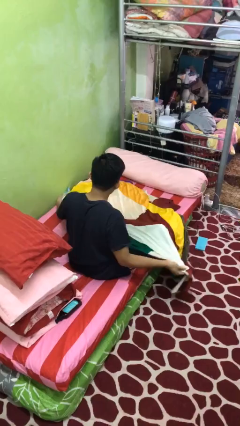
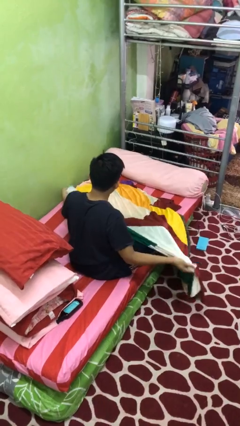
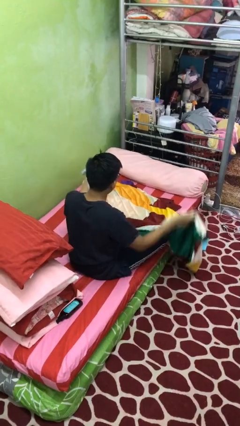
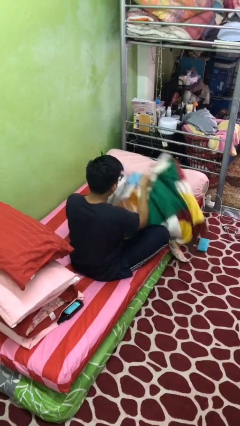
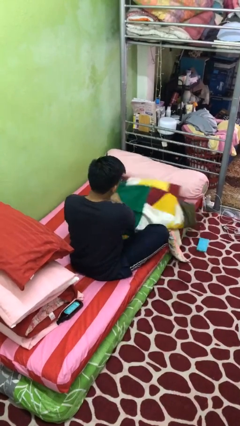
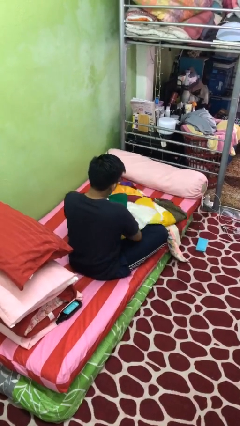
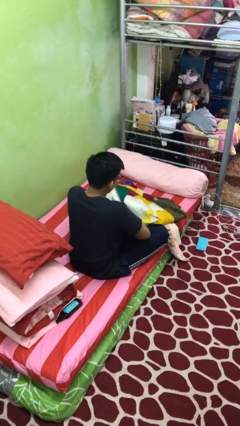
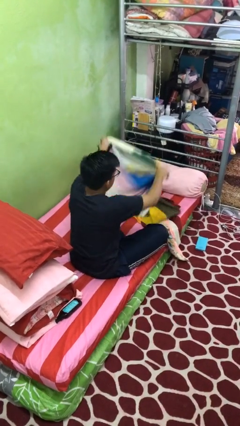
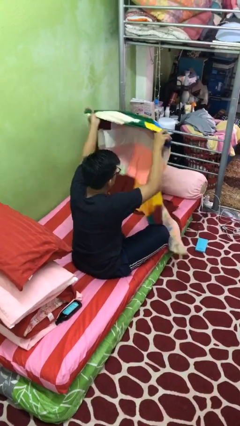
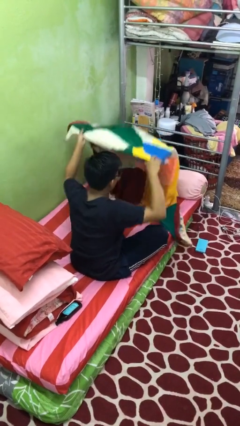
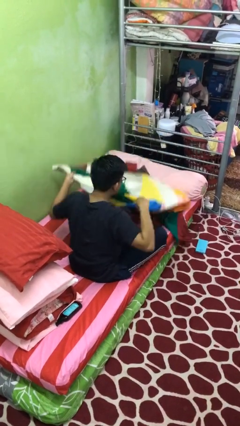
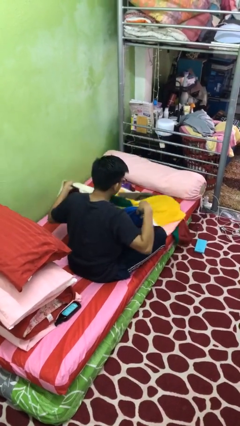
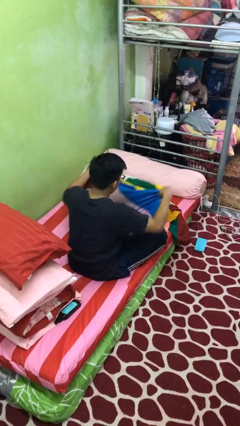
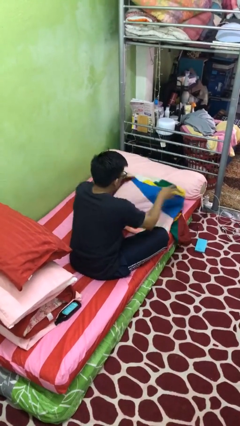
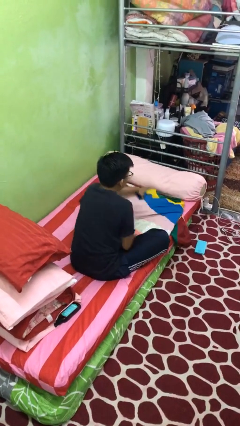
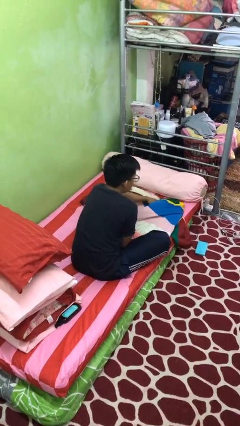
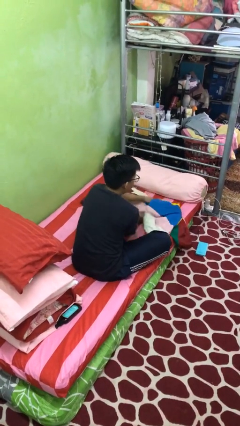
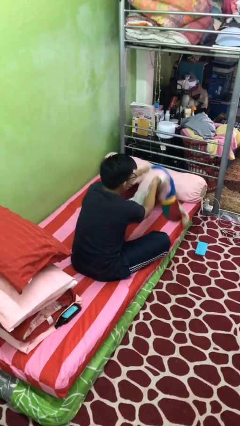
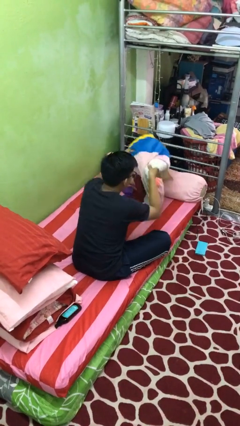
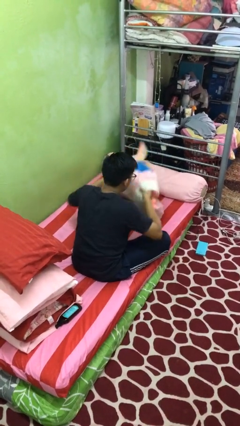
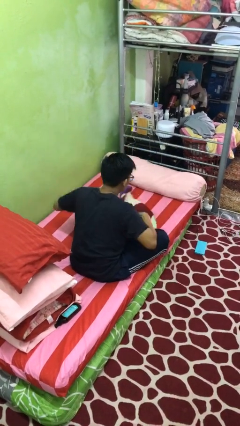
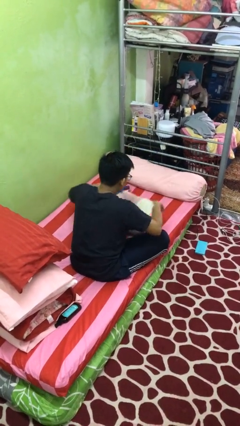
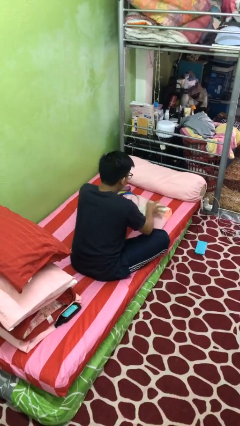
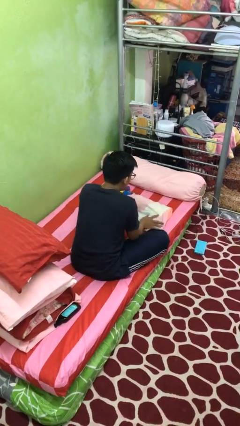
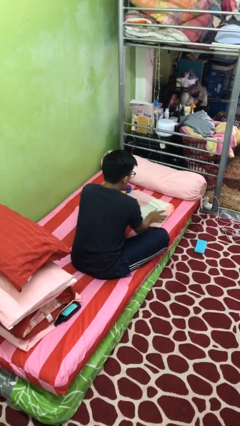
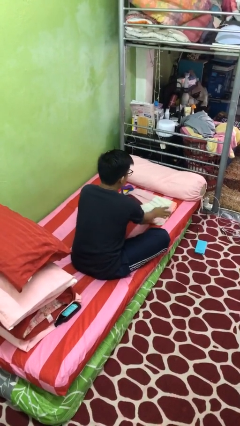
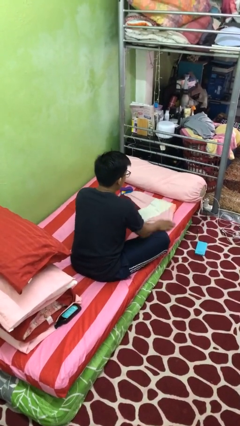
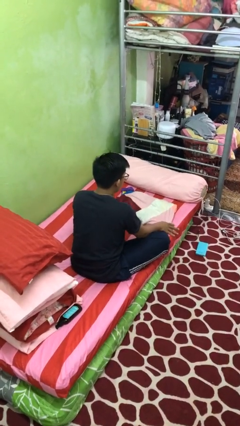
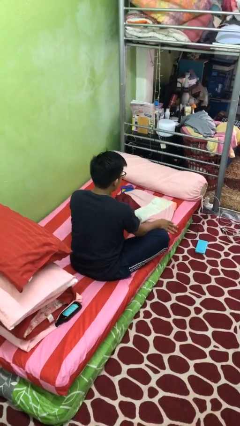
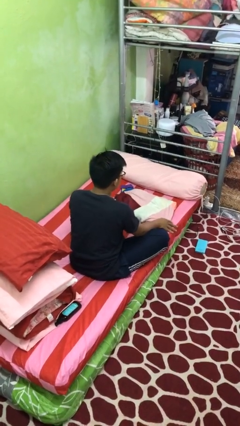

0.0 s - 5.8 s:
person folds blanket

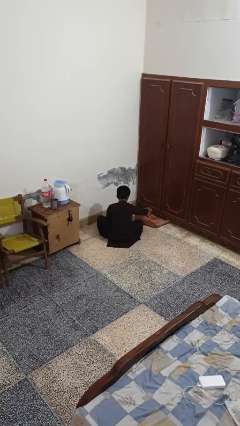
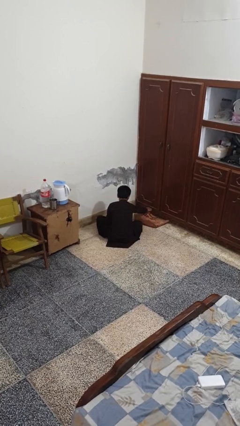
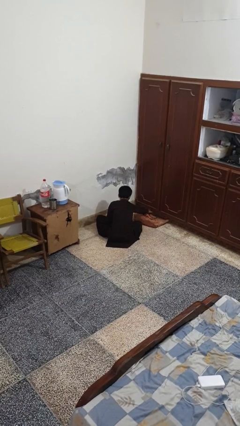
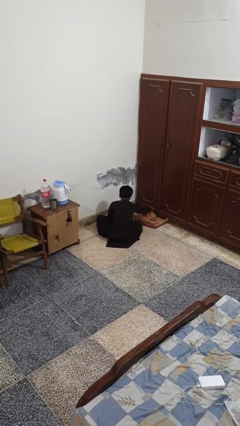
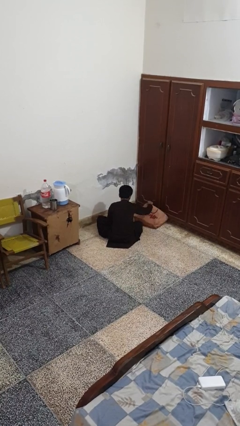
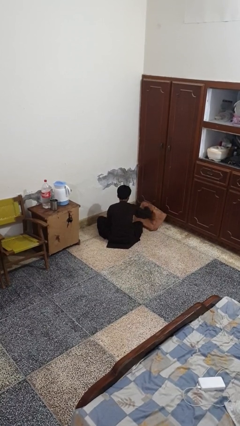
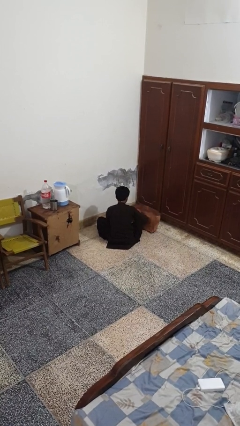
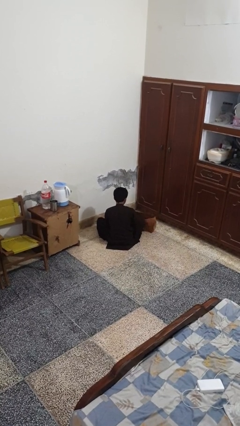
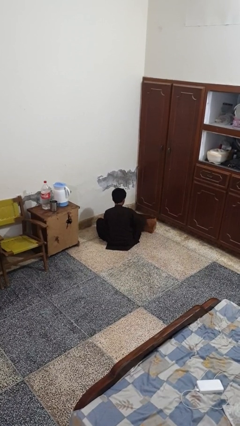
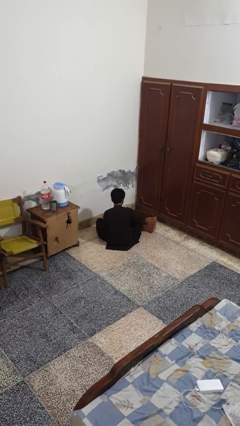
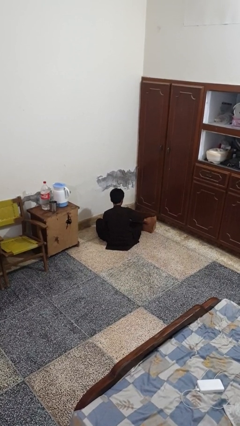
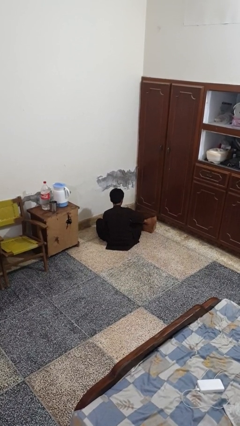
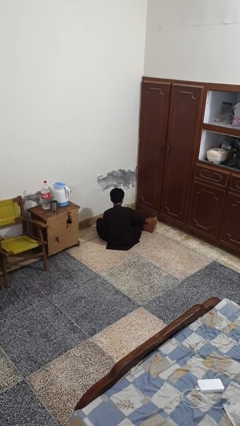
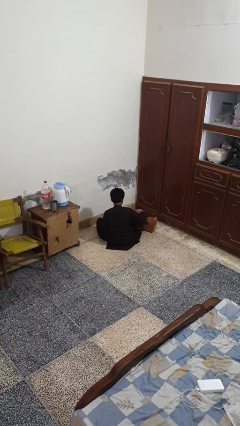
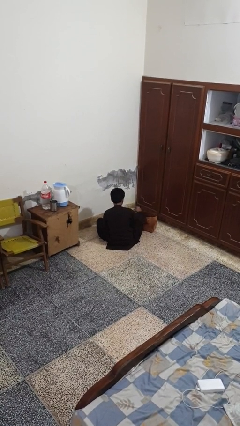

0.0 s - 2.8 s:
person takes object from bag

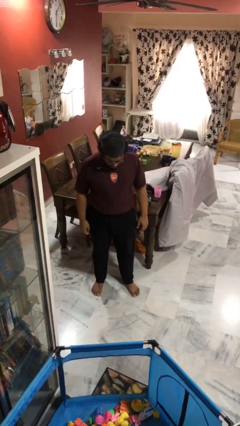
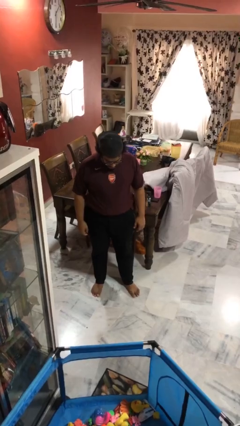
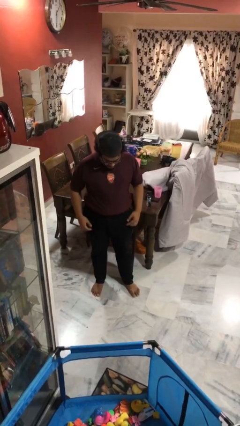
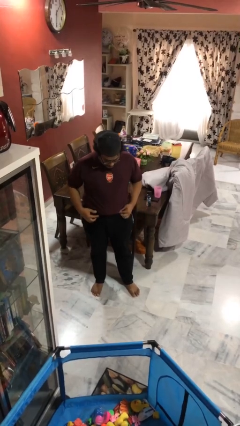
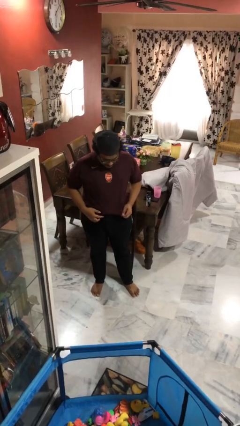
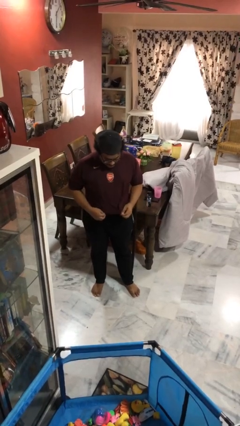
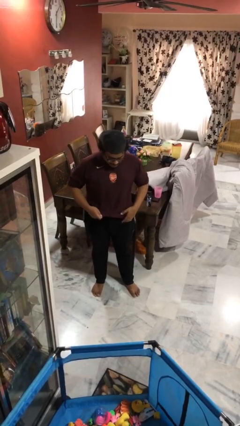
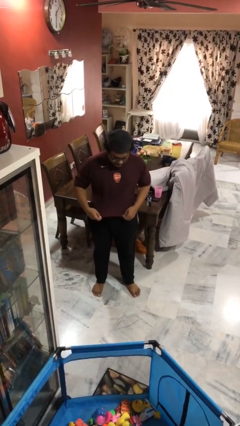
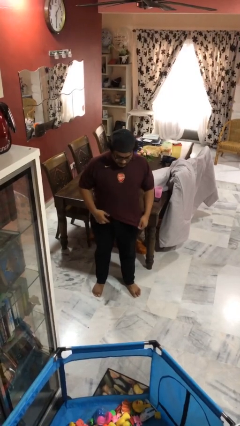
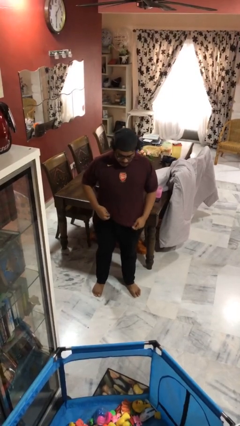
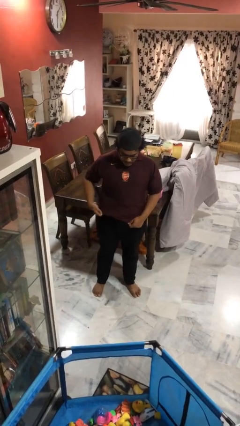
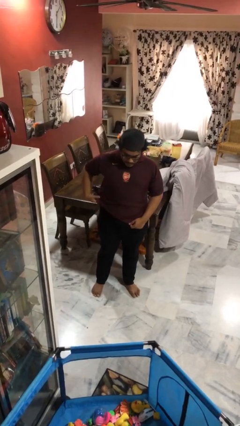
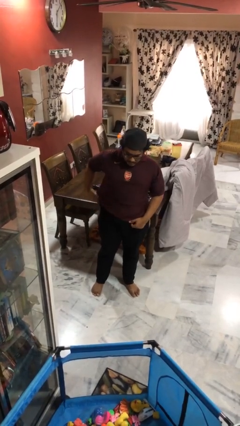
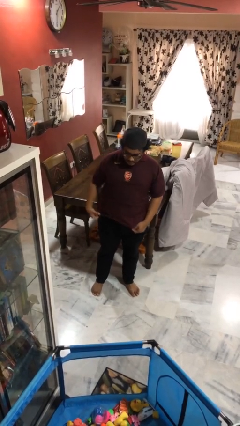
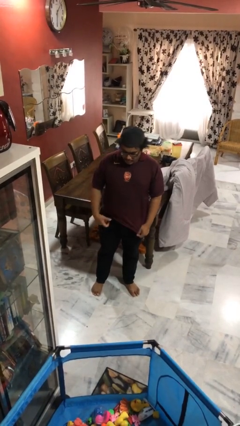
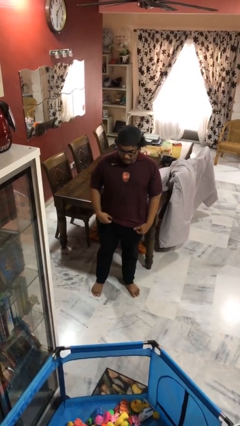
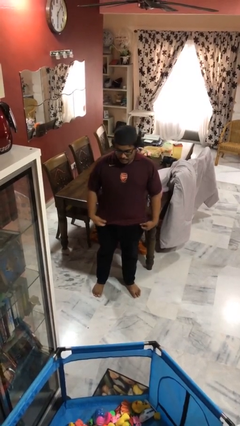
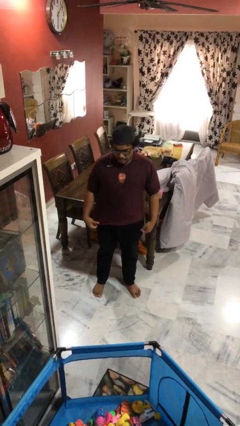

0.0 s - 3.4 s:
person untucks shirt

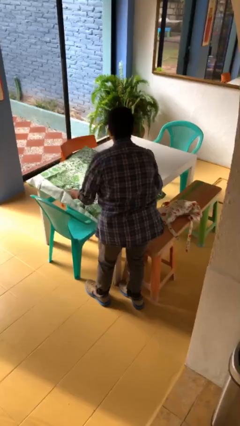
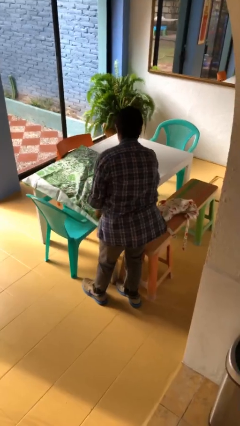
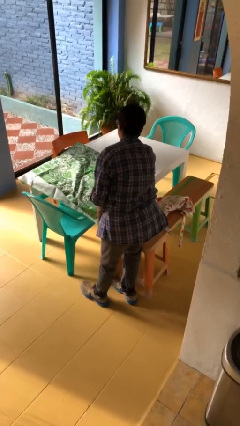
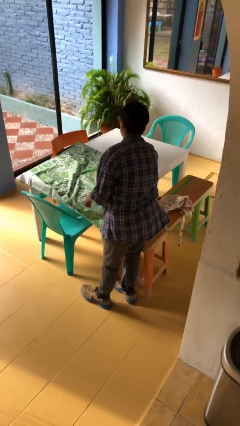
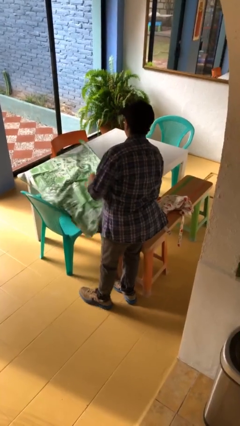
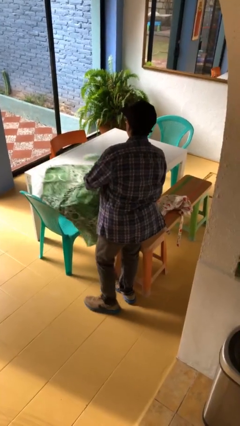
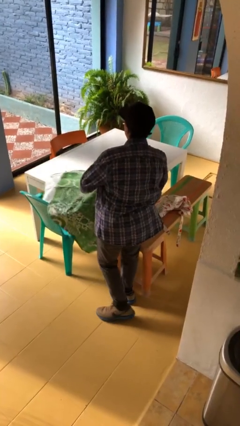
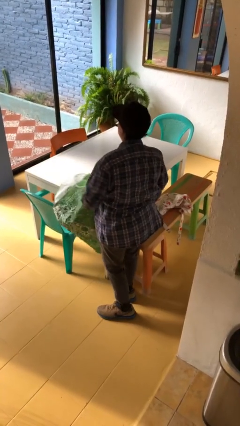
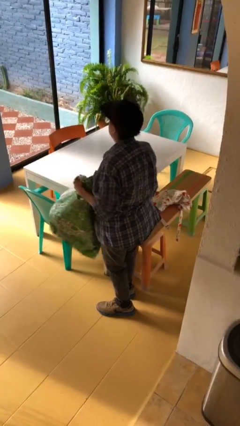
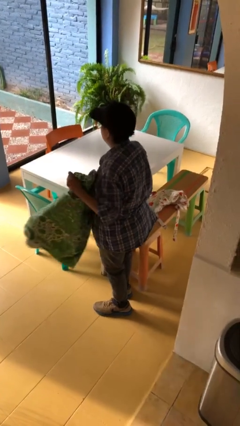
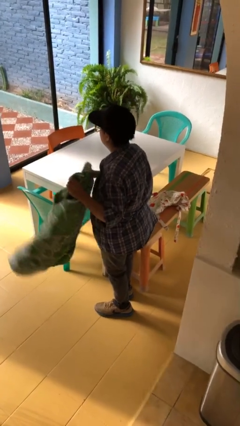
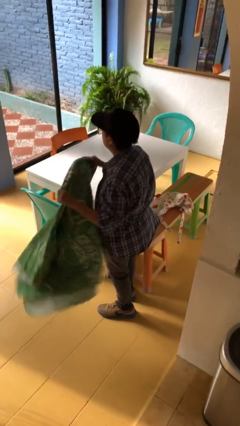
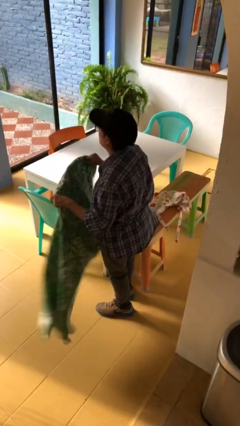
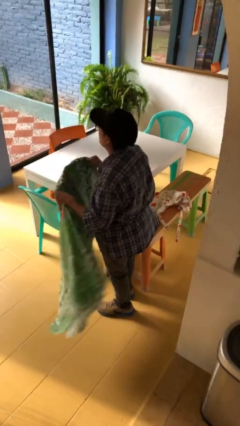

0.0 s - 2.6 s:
person folds tablecloth

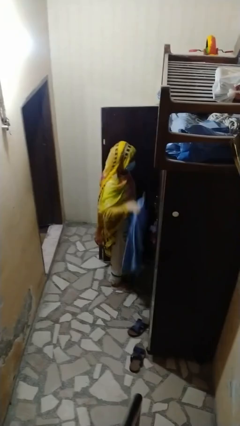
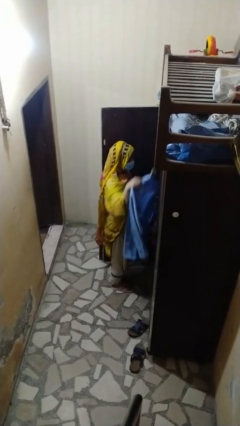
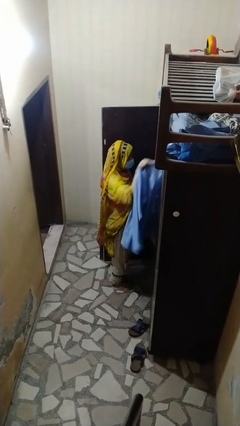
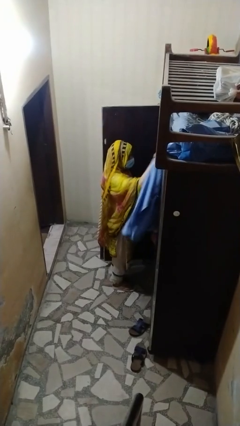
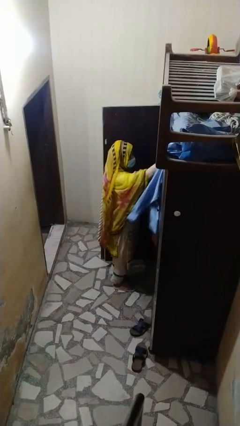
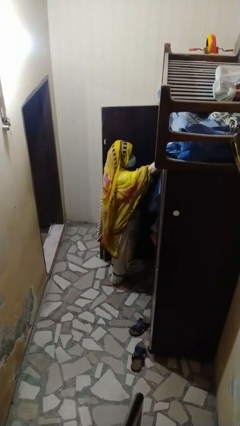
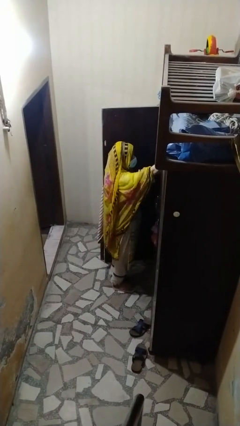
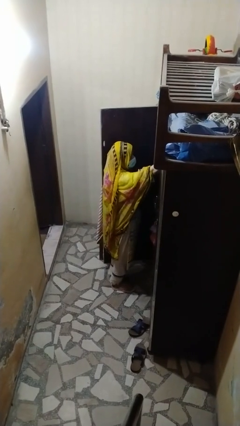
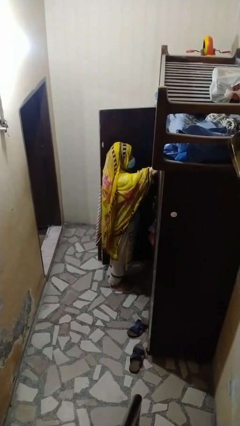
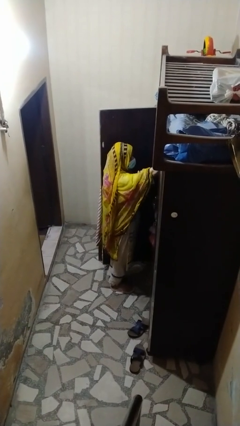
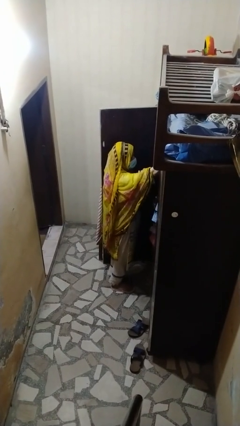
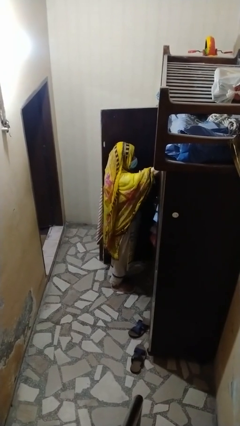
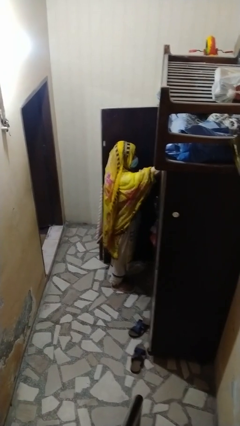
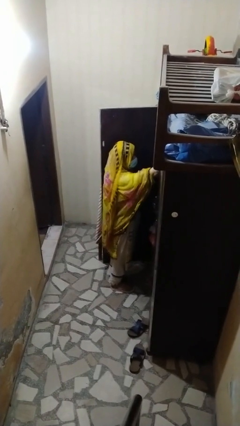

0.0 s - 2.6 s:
person puts clothes into closet

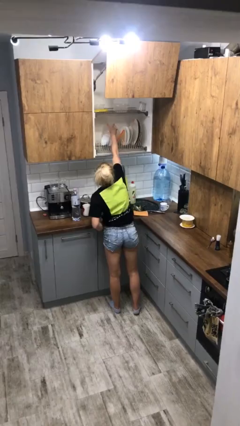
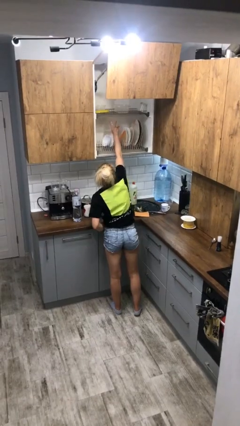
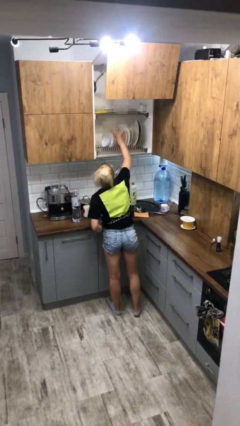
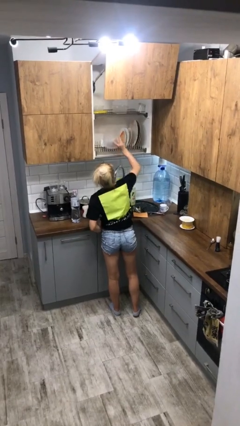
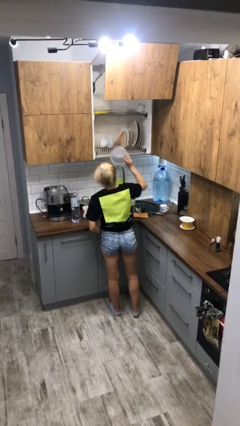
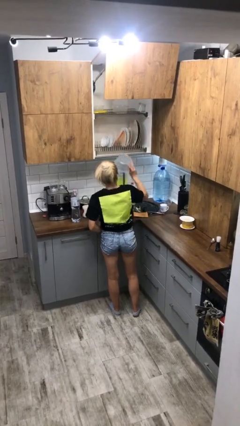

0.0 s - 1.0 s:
person picks up object from shelf
